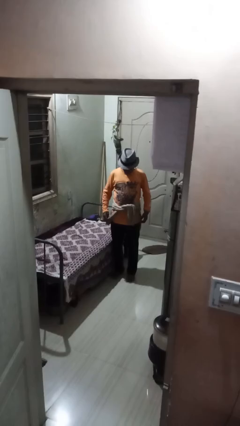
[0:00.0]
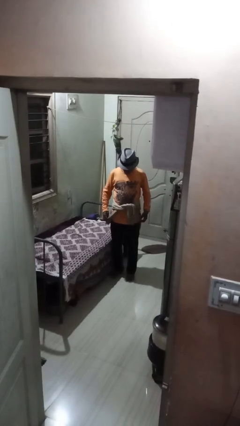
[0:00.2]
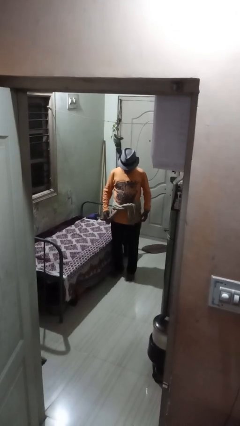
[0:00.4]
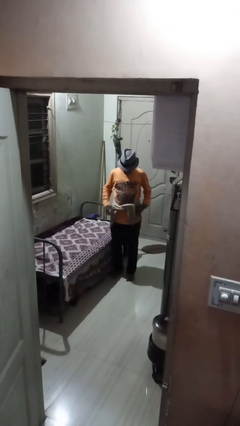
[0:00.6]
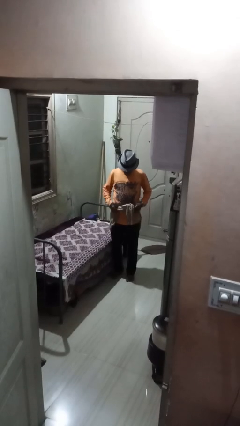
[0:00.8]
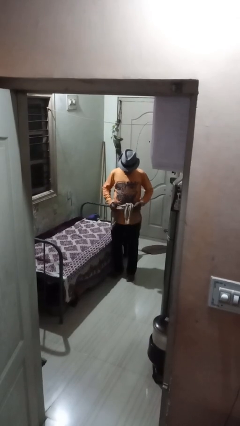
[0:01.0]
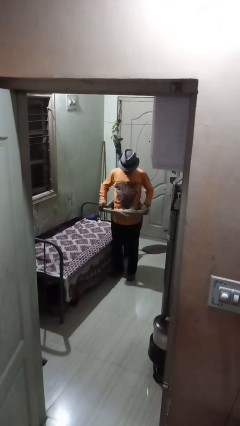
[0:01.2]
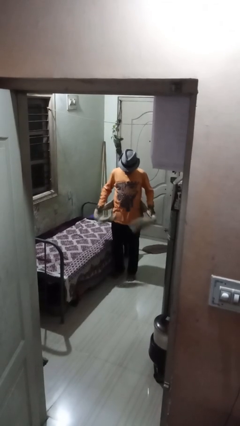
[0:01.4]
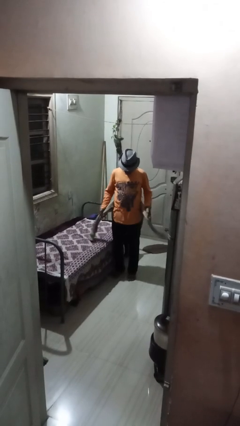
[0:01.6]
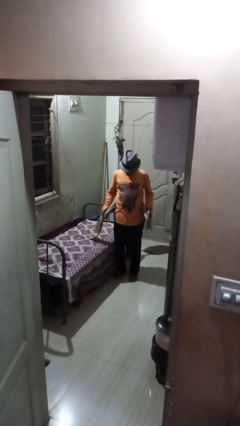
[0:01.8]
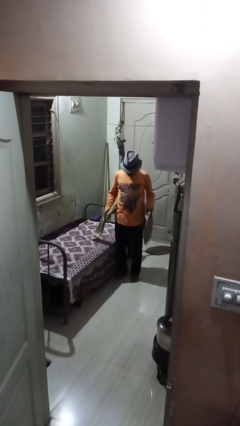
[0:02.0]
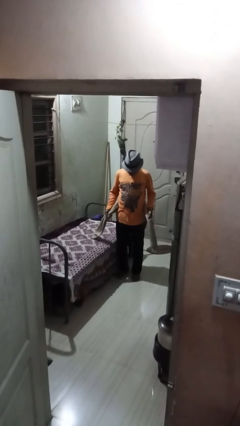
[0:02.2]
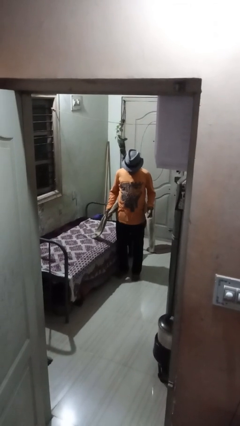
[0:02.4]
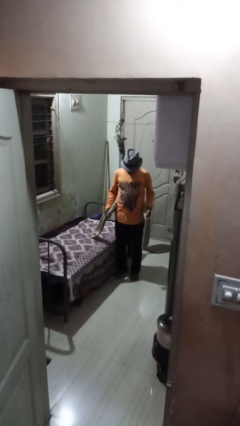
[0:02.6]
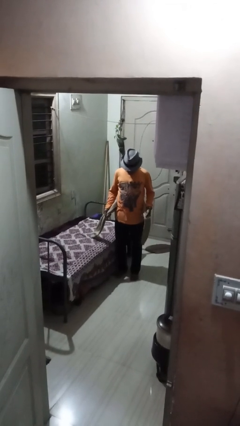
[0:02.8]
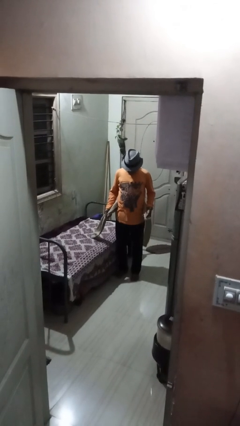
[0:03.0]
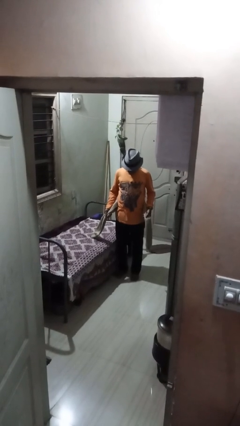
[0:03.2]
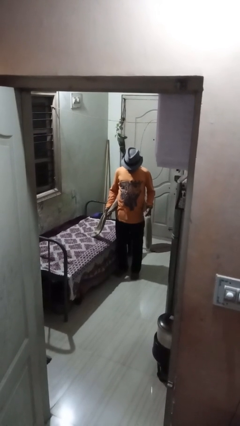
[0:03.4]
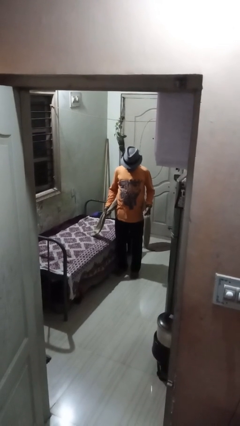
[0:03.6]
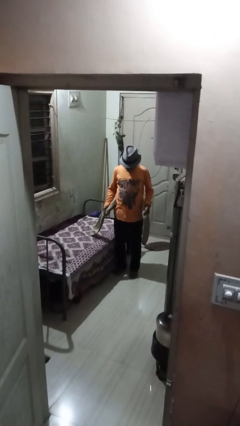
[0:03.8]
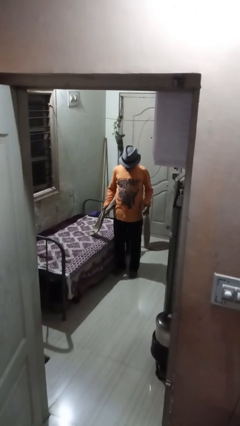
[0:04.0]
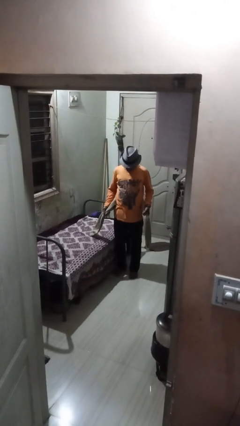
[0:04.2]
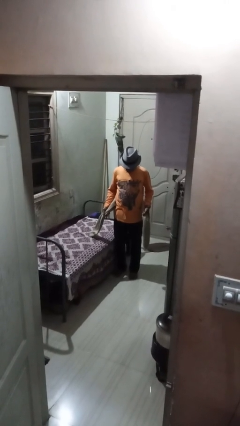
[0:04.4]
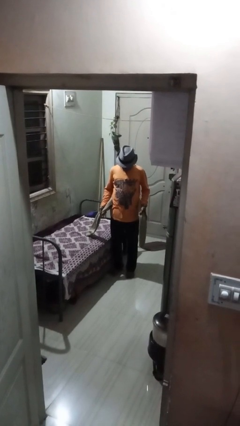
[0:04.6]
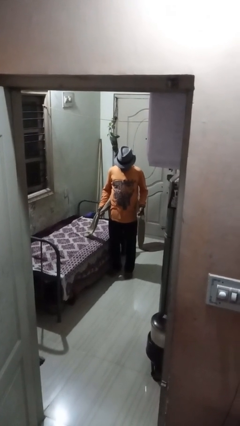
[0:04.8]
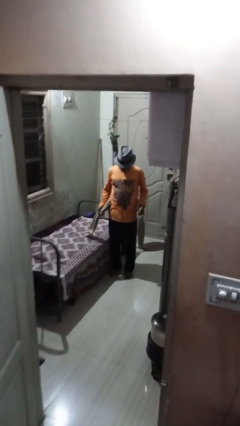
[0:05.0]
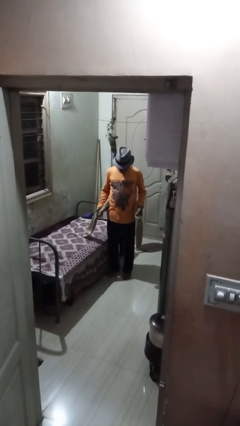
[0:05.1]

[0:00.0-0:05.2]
person unties jacket around waist

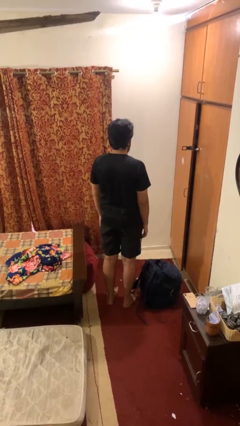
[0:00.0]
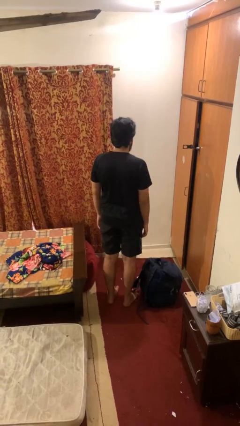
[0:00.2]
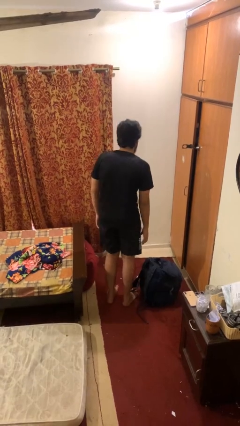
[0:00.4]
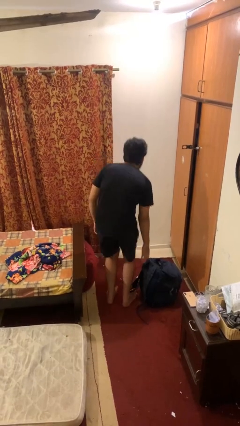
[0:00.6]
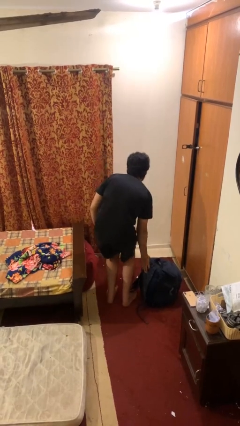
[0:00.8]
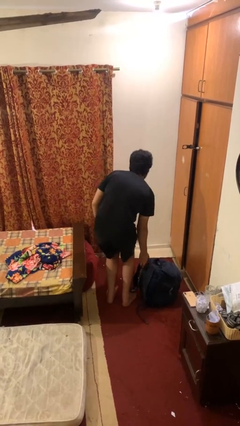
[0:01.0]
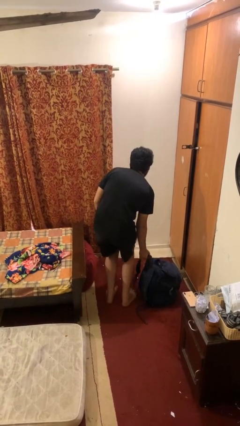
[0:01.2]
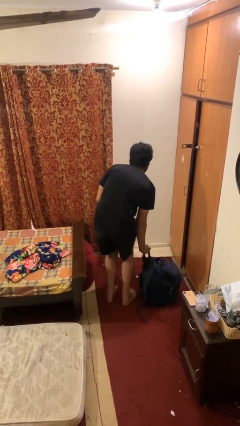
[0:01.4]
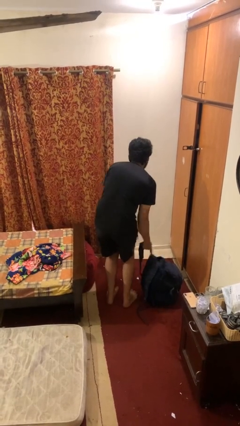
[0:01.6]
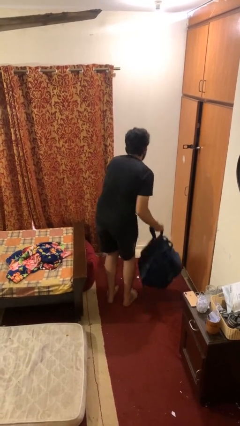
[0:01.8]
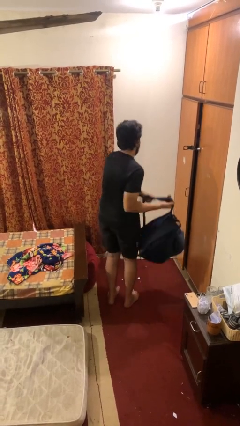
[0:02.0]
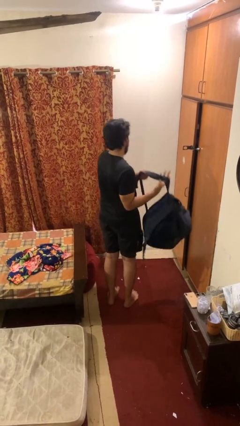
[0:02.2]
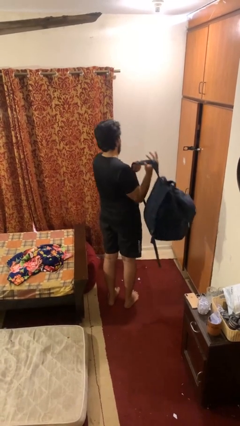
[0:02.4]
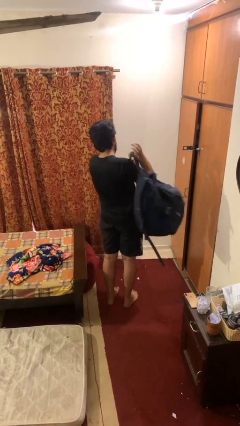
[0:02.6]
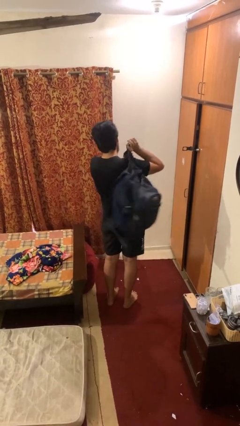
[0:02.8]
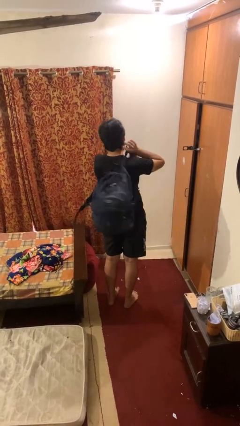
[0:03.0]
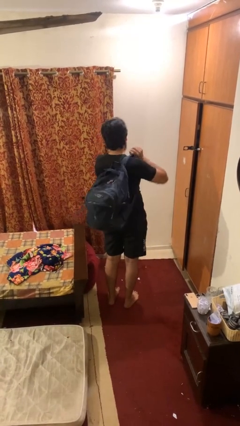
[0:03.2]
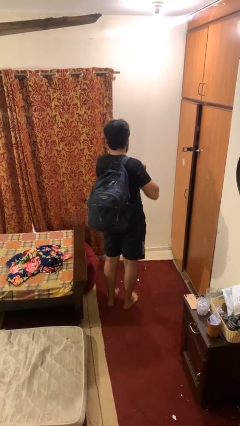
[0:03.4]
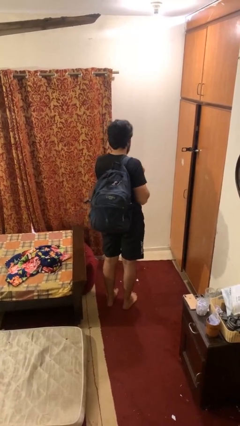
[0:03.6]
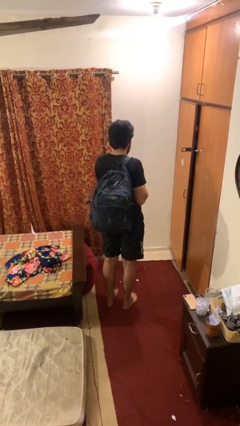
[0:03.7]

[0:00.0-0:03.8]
person puts on backpack

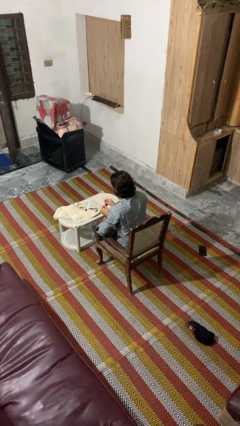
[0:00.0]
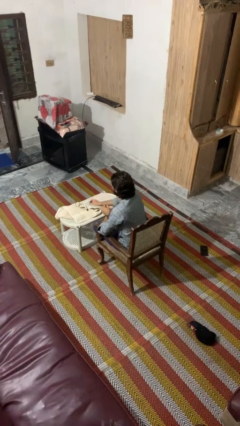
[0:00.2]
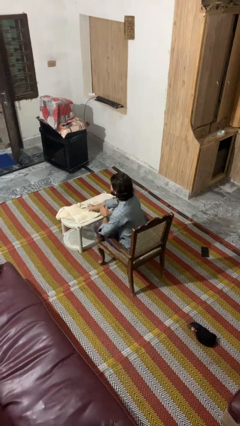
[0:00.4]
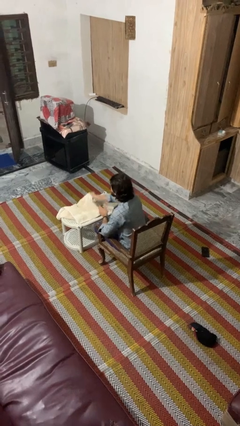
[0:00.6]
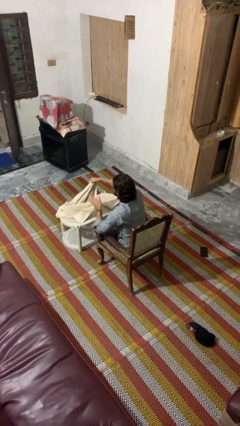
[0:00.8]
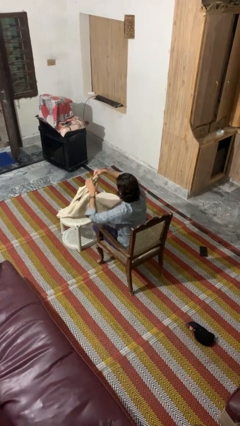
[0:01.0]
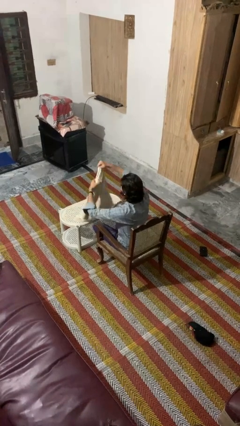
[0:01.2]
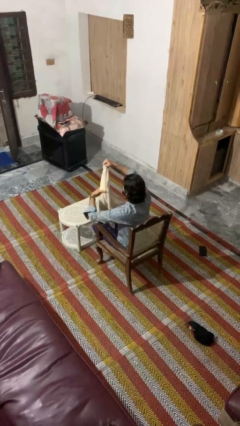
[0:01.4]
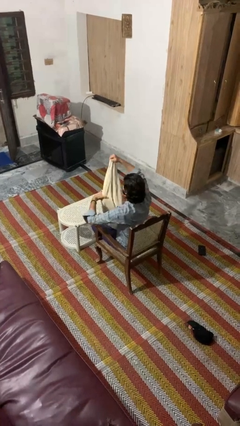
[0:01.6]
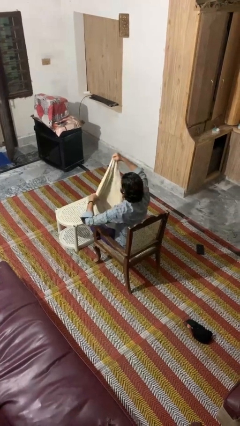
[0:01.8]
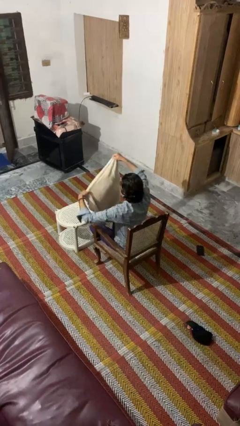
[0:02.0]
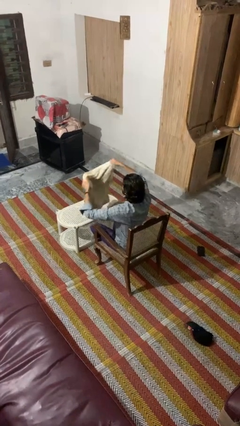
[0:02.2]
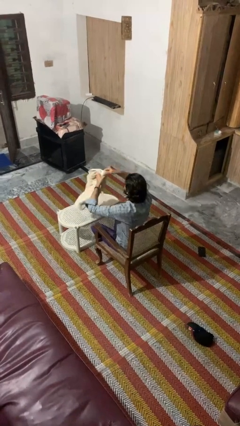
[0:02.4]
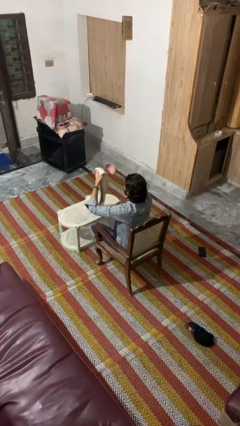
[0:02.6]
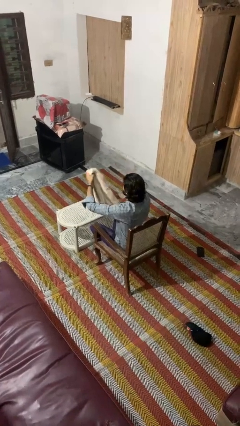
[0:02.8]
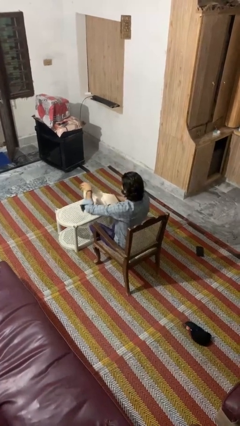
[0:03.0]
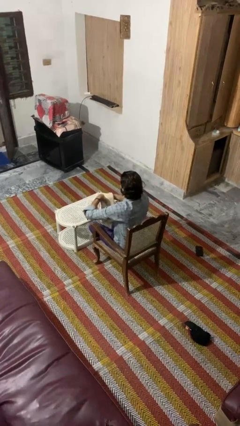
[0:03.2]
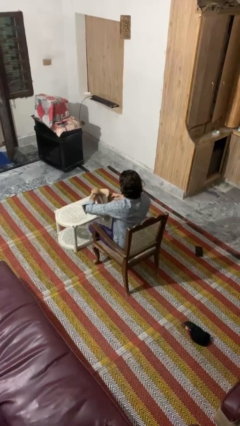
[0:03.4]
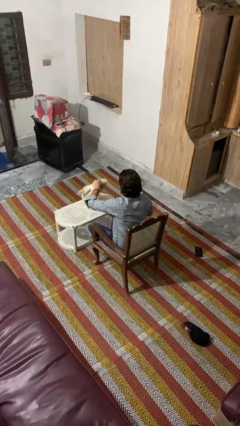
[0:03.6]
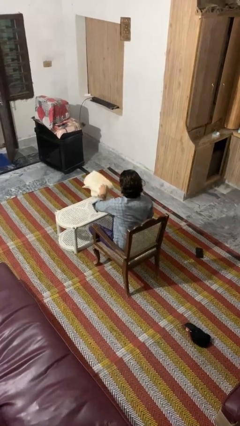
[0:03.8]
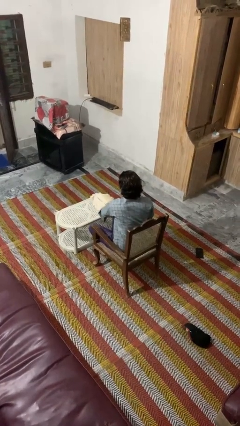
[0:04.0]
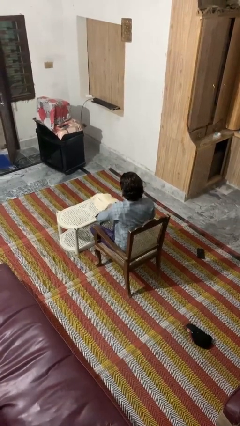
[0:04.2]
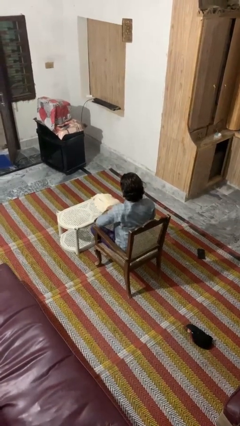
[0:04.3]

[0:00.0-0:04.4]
person folds towel

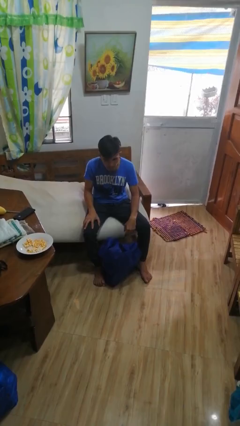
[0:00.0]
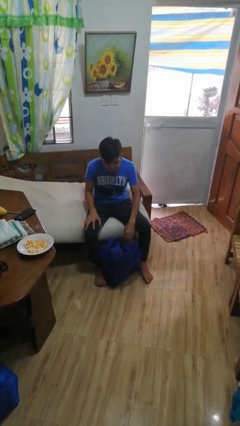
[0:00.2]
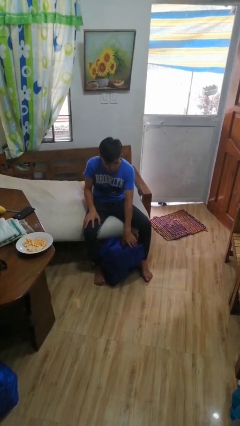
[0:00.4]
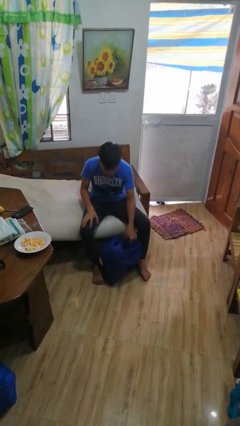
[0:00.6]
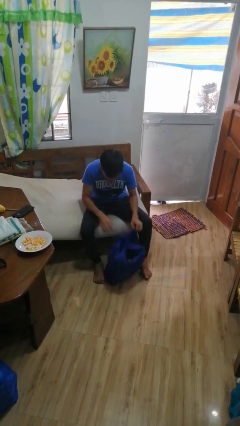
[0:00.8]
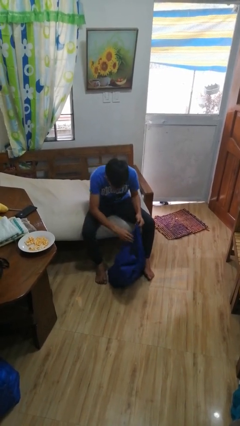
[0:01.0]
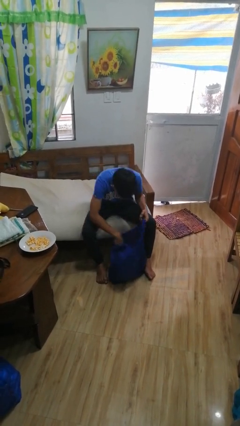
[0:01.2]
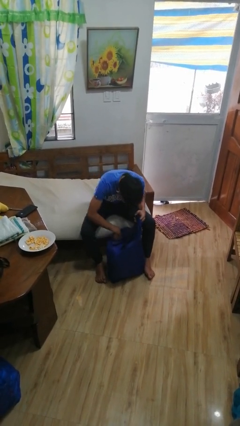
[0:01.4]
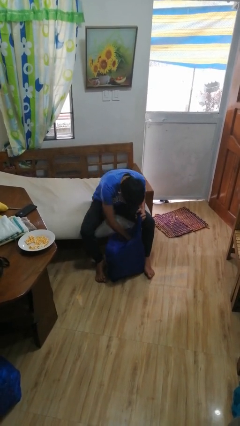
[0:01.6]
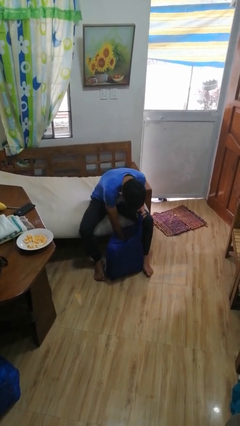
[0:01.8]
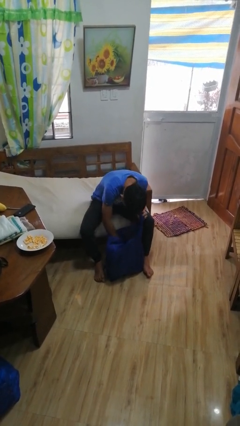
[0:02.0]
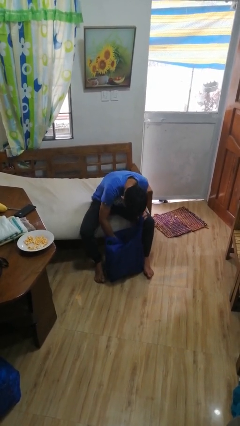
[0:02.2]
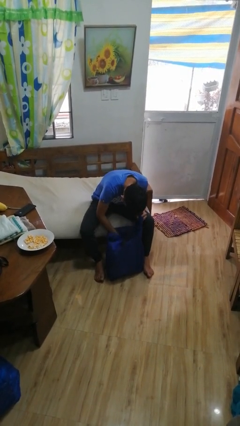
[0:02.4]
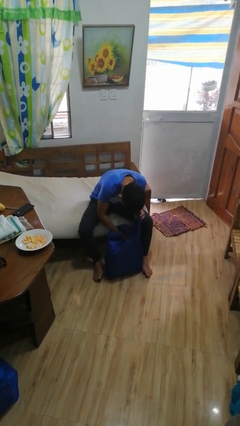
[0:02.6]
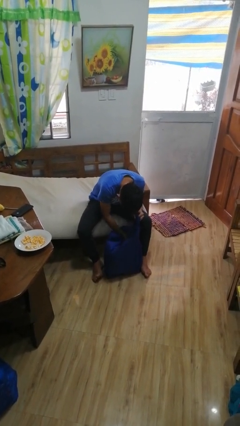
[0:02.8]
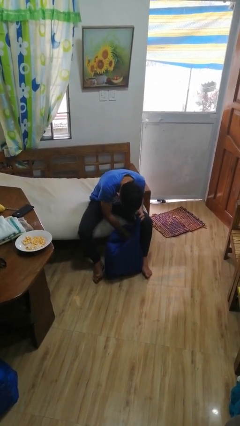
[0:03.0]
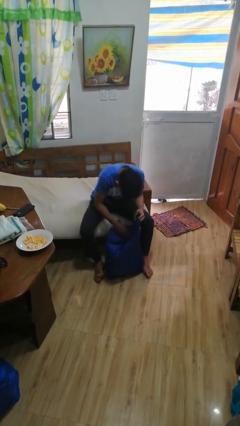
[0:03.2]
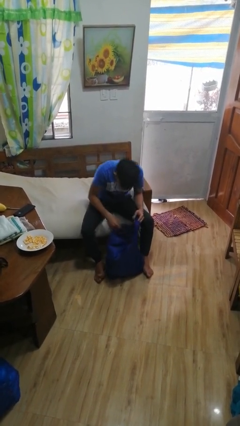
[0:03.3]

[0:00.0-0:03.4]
person searches in bag

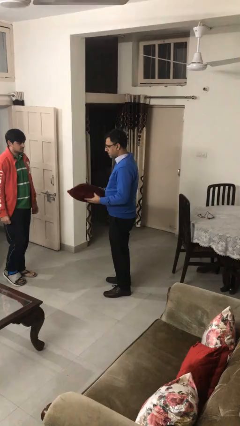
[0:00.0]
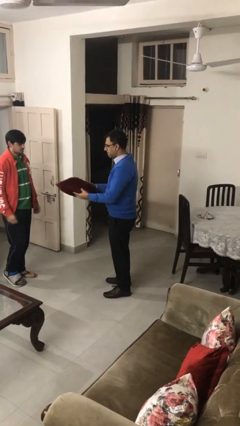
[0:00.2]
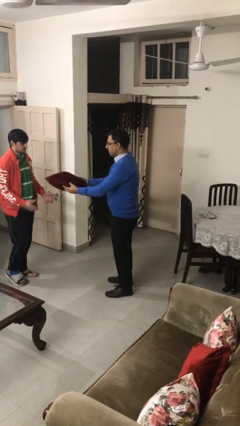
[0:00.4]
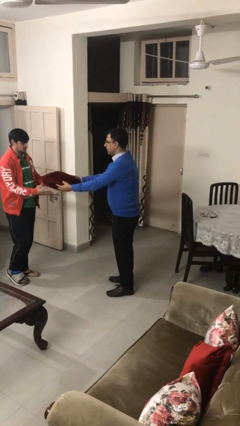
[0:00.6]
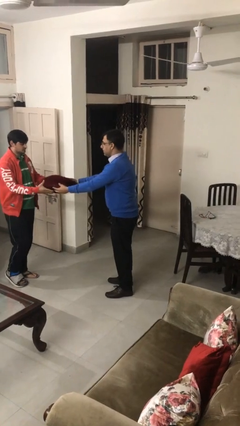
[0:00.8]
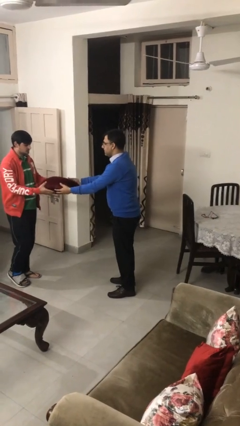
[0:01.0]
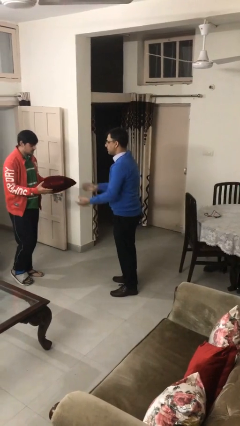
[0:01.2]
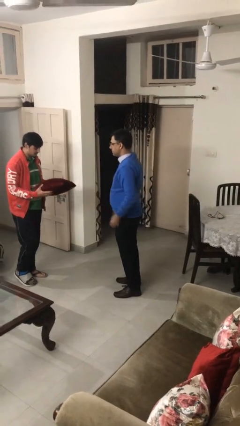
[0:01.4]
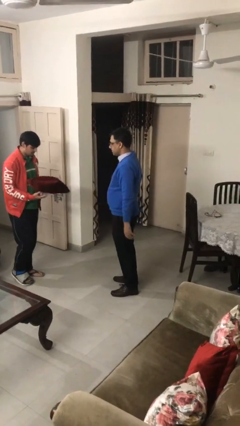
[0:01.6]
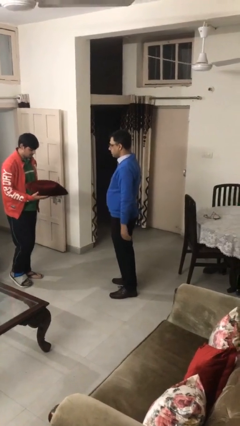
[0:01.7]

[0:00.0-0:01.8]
person transfers object to person
